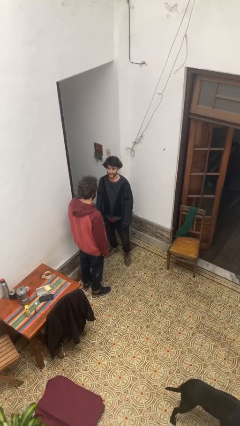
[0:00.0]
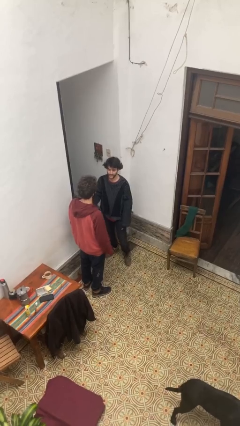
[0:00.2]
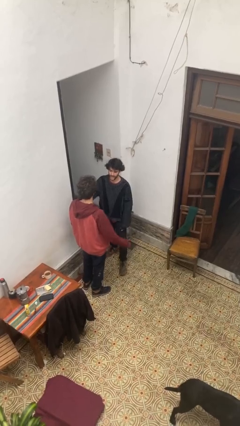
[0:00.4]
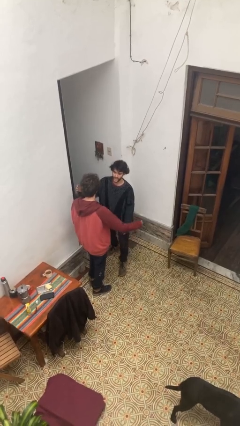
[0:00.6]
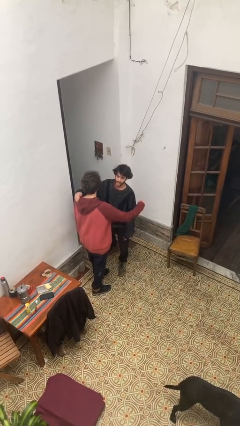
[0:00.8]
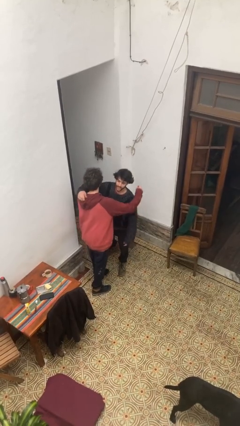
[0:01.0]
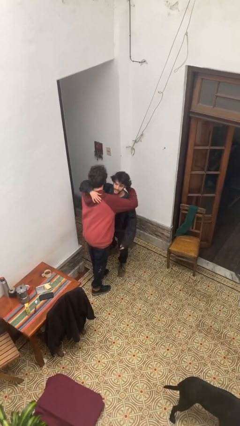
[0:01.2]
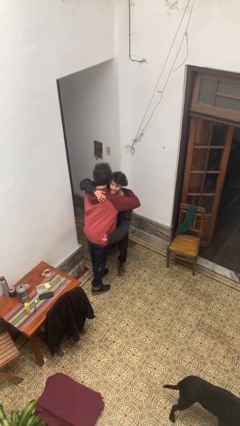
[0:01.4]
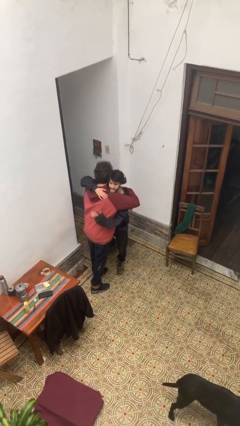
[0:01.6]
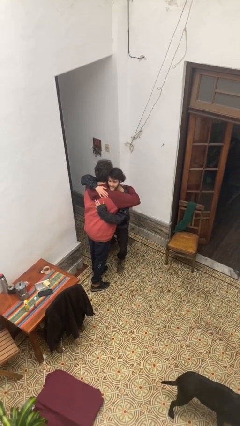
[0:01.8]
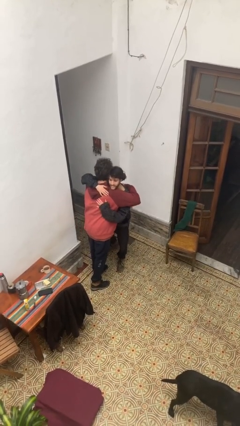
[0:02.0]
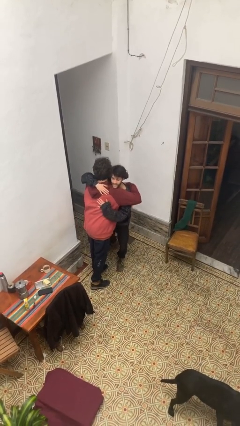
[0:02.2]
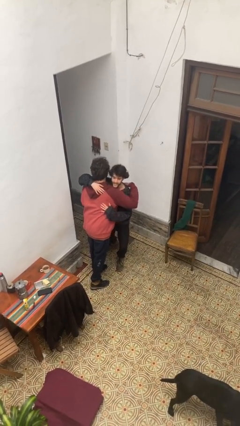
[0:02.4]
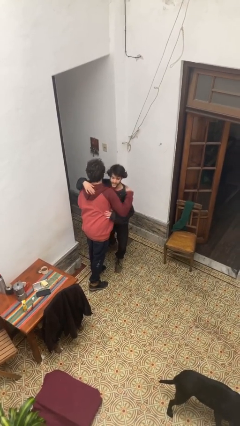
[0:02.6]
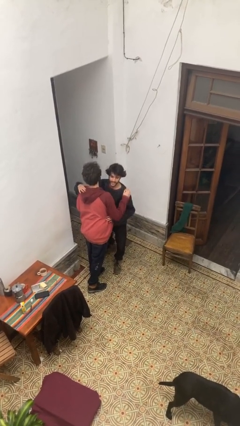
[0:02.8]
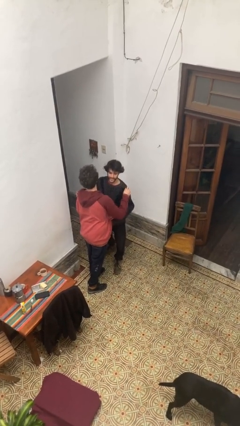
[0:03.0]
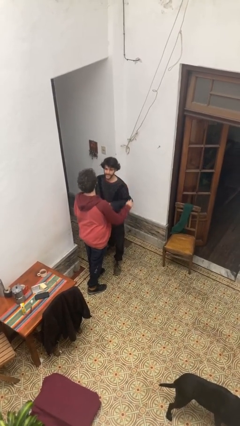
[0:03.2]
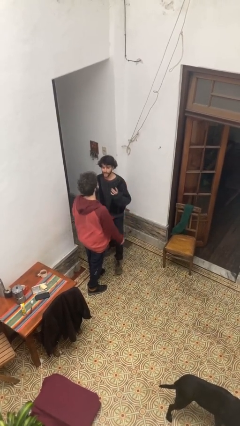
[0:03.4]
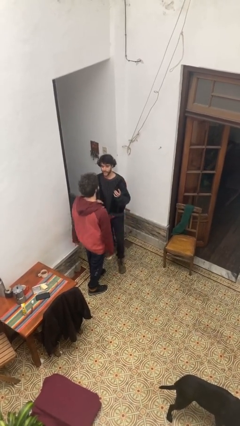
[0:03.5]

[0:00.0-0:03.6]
person embraces person

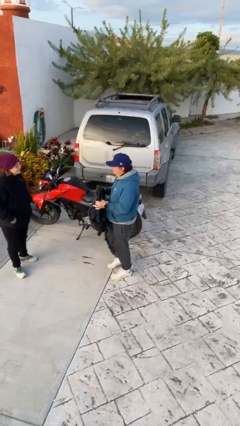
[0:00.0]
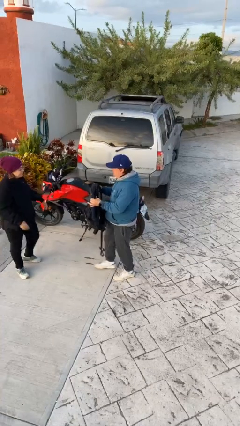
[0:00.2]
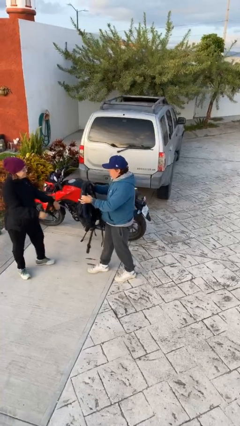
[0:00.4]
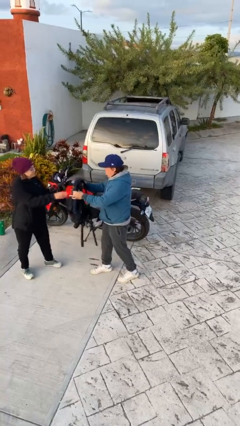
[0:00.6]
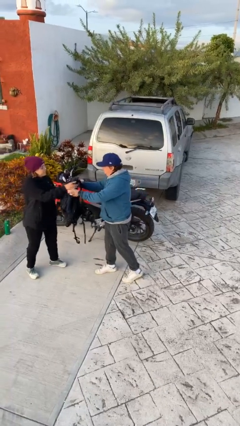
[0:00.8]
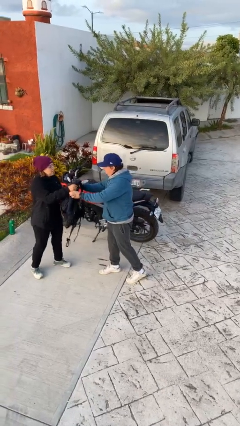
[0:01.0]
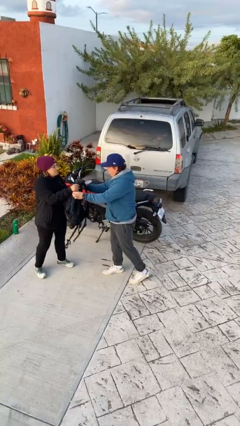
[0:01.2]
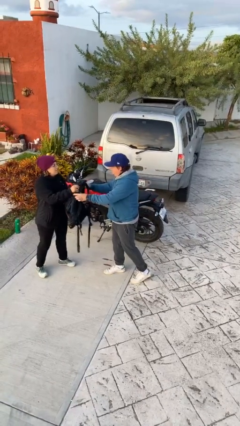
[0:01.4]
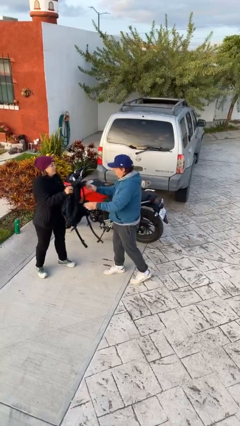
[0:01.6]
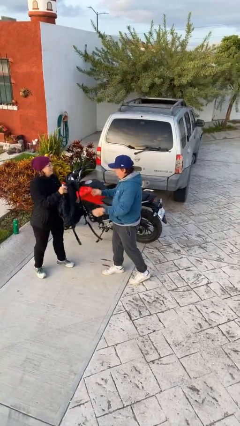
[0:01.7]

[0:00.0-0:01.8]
person transfers object to person

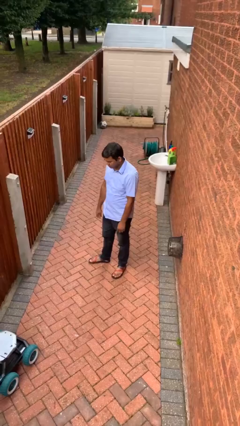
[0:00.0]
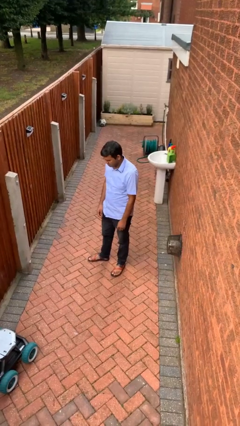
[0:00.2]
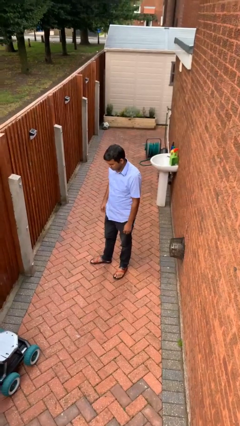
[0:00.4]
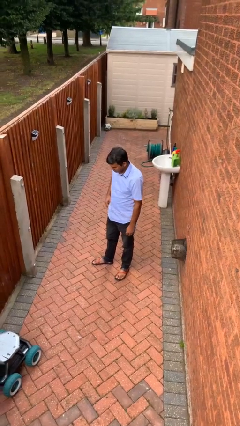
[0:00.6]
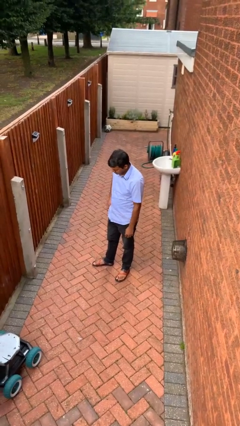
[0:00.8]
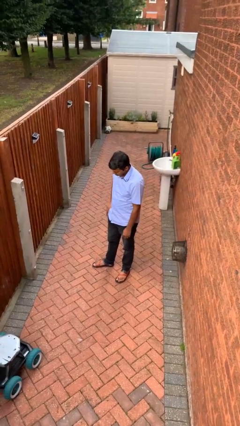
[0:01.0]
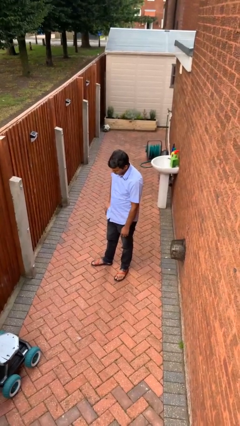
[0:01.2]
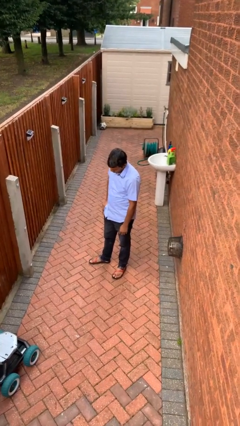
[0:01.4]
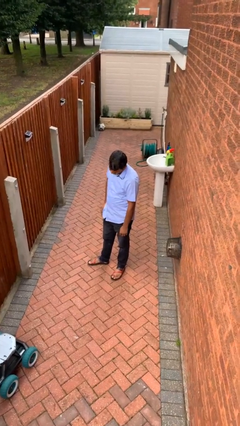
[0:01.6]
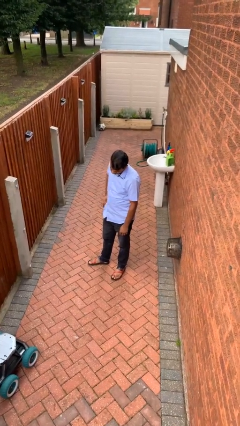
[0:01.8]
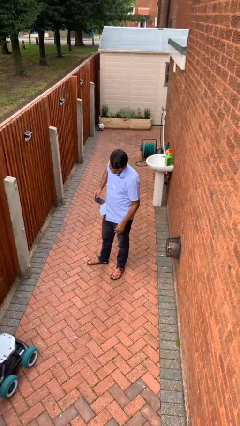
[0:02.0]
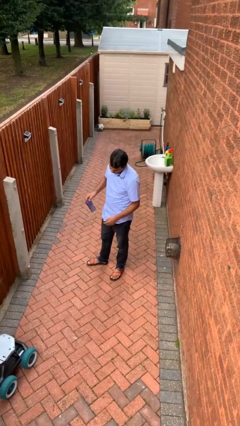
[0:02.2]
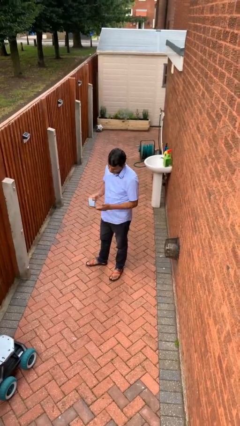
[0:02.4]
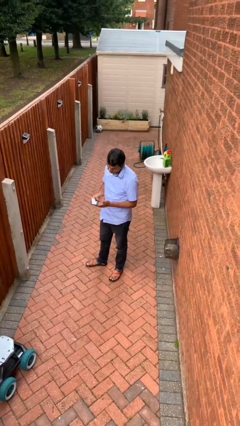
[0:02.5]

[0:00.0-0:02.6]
person takes phone from pocket

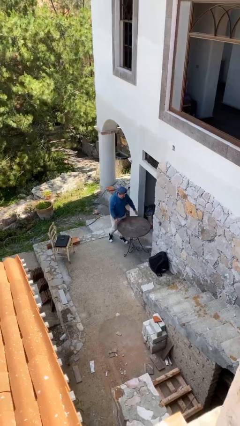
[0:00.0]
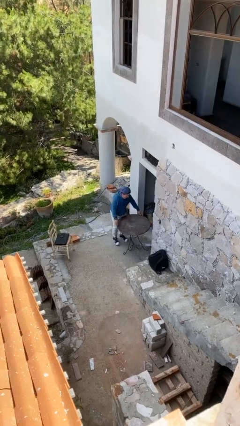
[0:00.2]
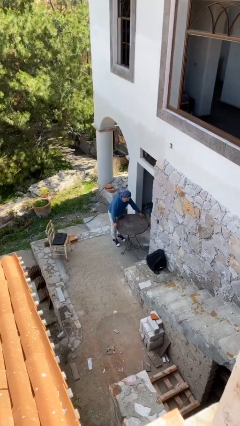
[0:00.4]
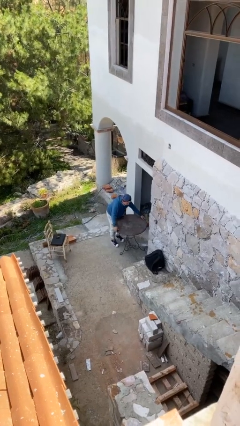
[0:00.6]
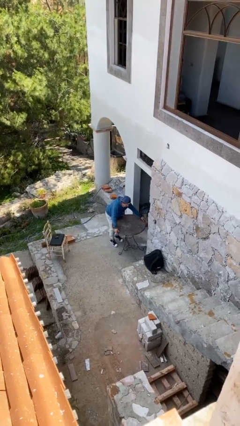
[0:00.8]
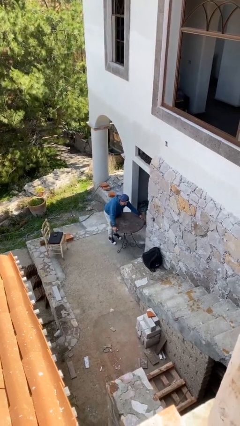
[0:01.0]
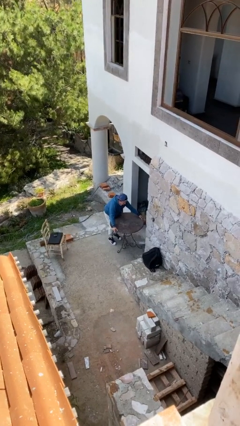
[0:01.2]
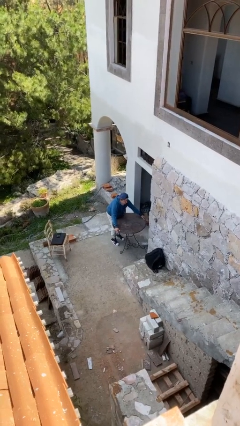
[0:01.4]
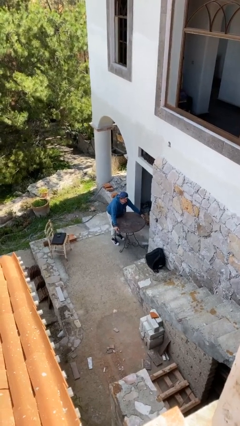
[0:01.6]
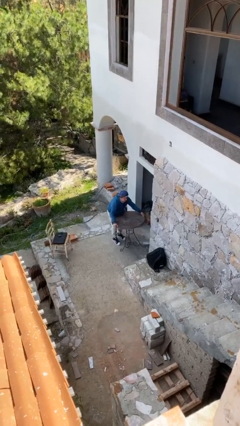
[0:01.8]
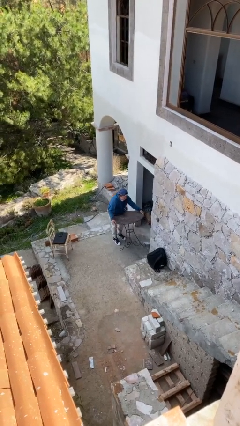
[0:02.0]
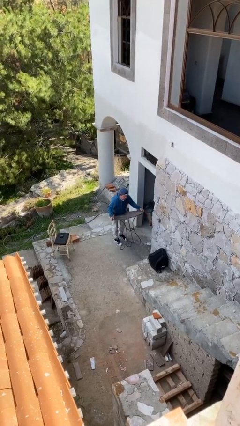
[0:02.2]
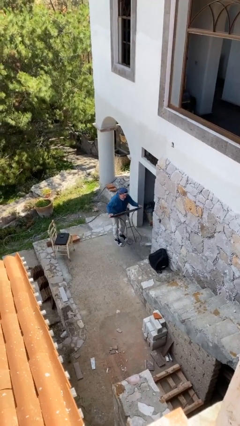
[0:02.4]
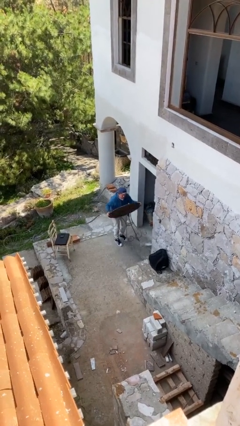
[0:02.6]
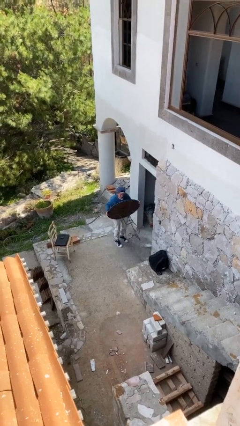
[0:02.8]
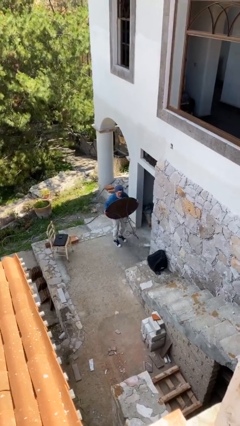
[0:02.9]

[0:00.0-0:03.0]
person picks up object from floor

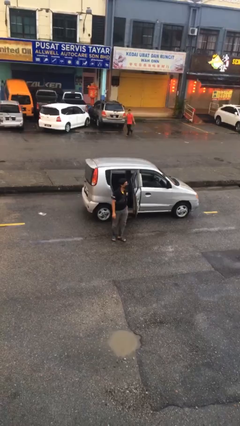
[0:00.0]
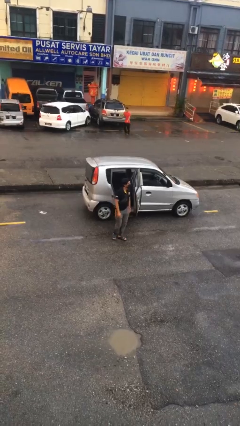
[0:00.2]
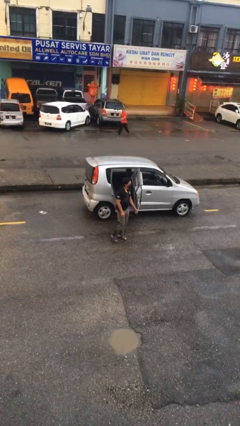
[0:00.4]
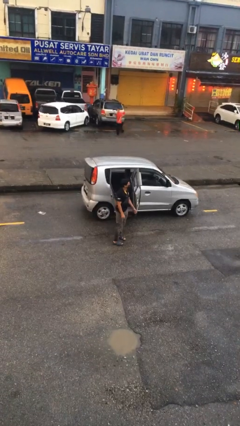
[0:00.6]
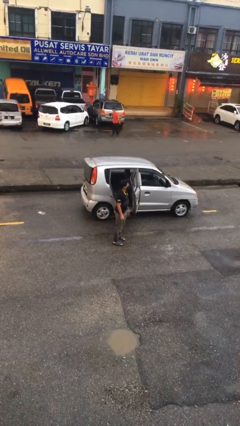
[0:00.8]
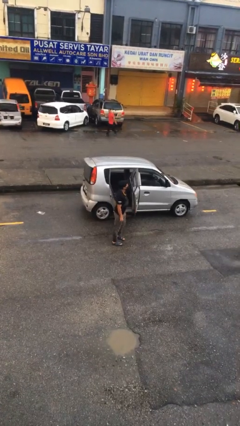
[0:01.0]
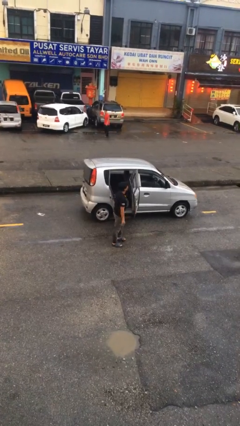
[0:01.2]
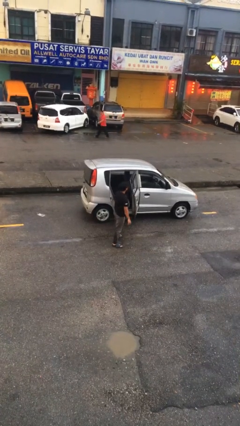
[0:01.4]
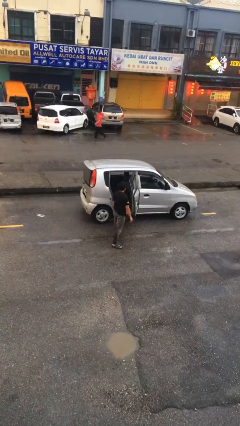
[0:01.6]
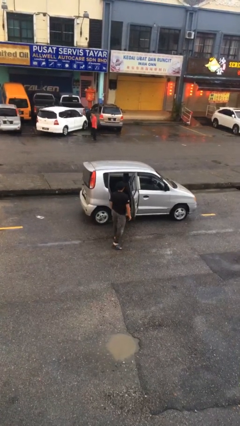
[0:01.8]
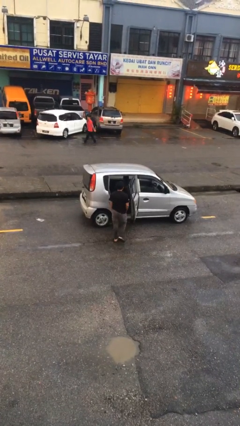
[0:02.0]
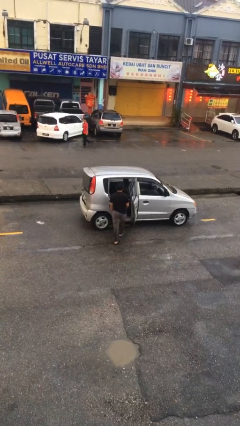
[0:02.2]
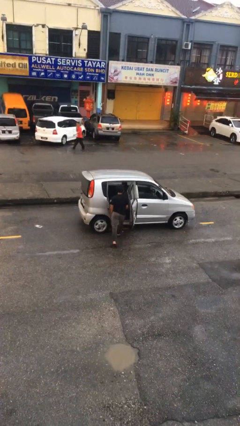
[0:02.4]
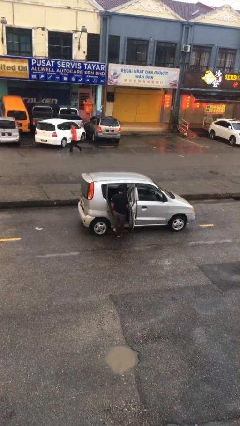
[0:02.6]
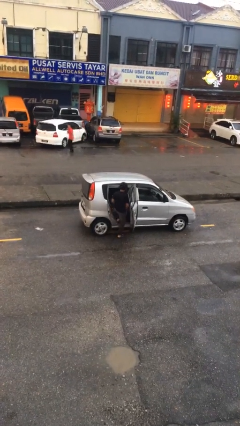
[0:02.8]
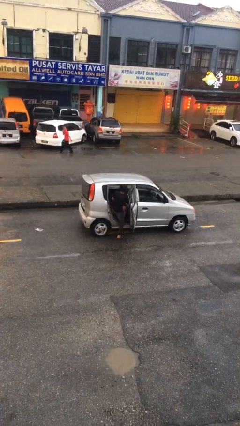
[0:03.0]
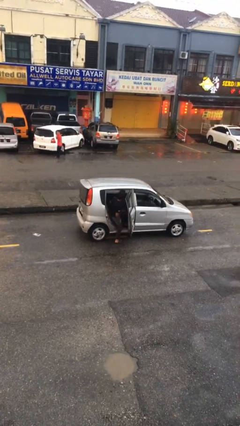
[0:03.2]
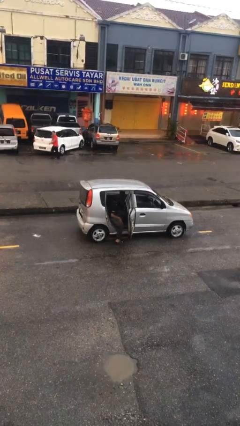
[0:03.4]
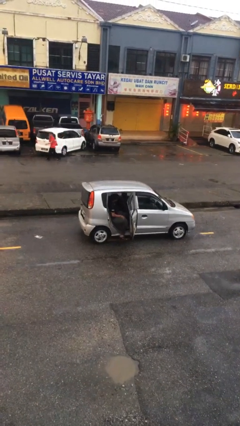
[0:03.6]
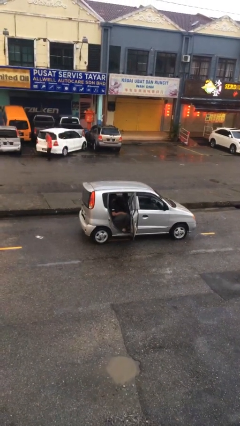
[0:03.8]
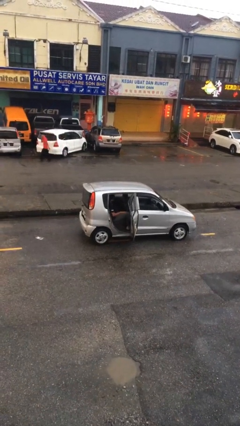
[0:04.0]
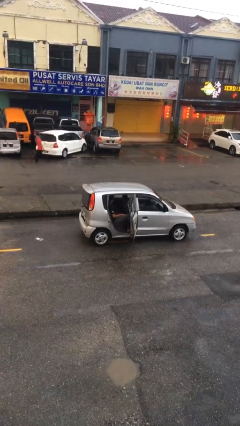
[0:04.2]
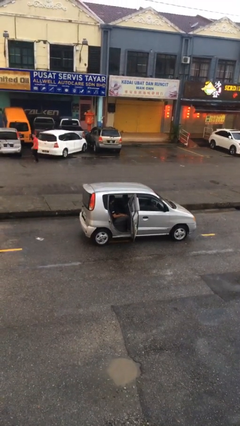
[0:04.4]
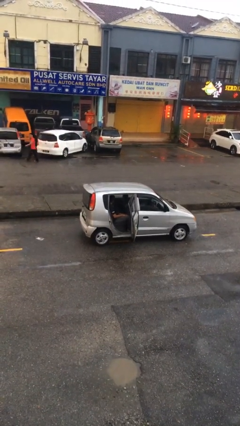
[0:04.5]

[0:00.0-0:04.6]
person enters car

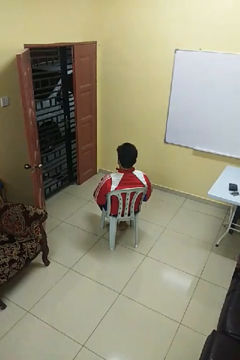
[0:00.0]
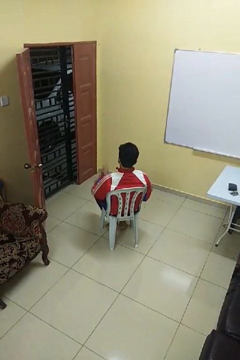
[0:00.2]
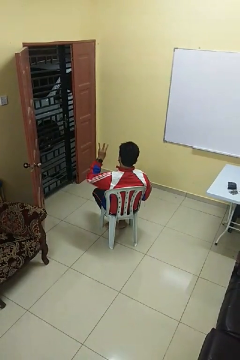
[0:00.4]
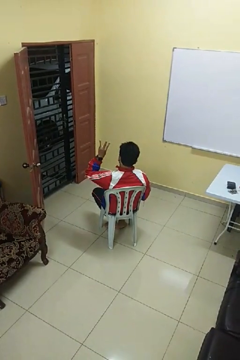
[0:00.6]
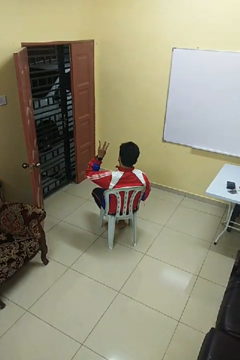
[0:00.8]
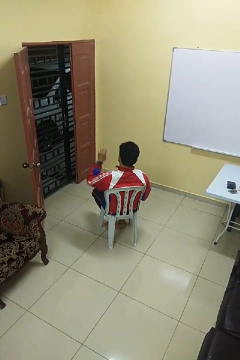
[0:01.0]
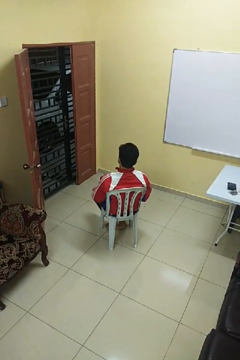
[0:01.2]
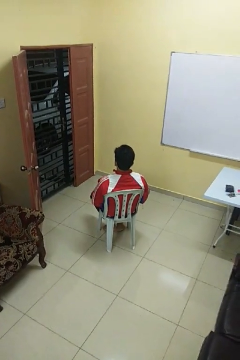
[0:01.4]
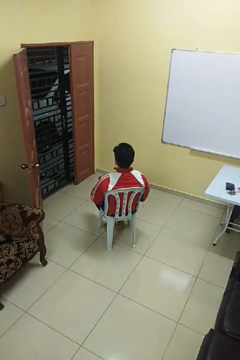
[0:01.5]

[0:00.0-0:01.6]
person gestures number three
